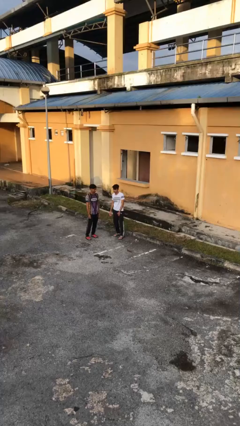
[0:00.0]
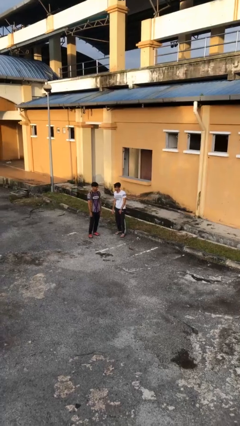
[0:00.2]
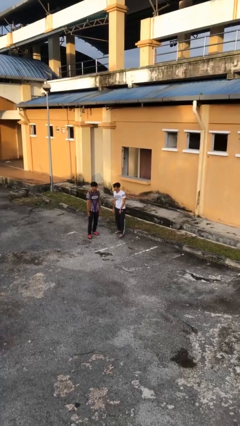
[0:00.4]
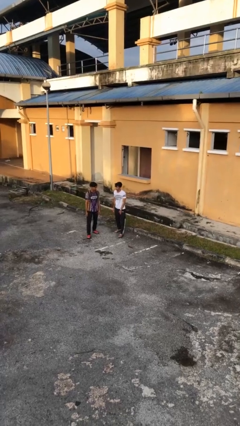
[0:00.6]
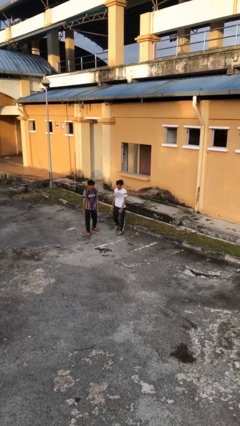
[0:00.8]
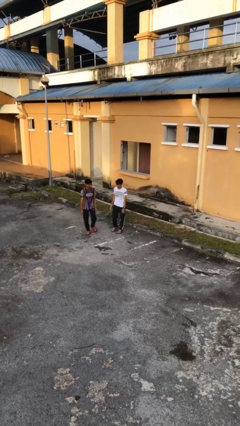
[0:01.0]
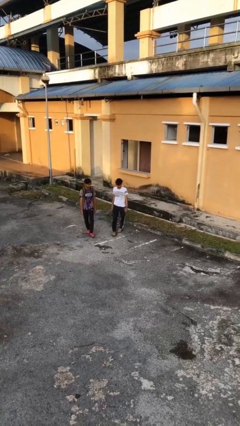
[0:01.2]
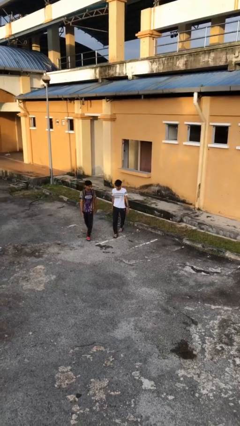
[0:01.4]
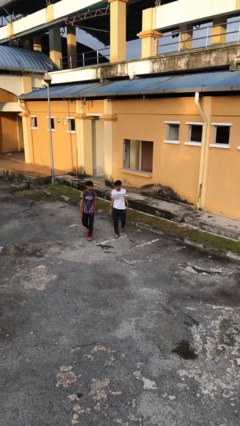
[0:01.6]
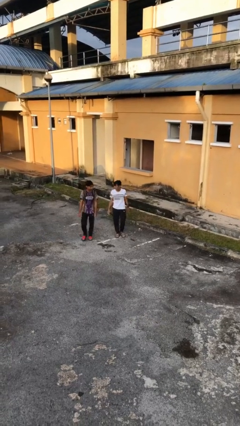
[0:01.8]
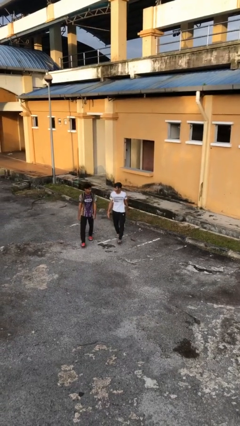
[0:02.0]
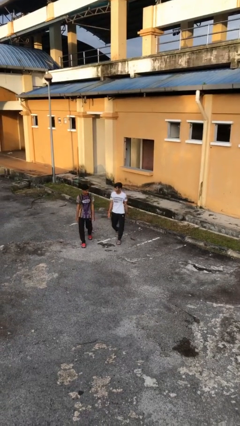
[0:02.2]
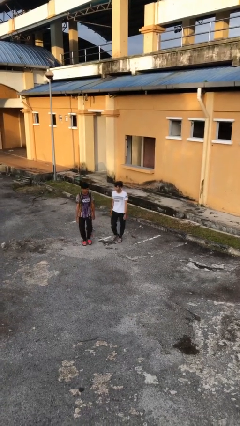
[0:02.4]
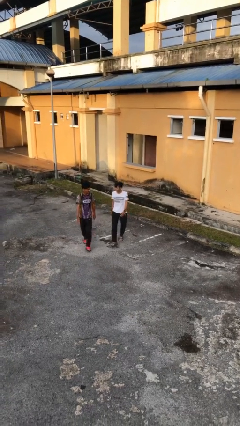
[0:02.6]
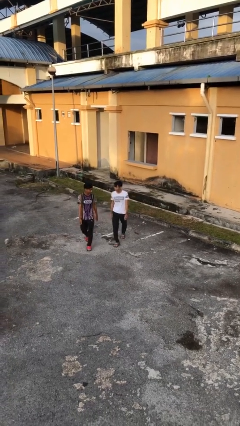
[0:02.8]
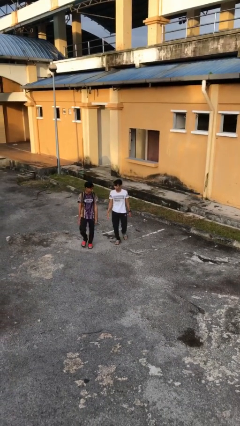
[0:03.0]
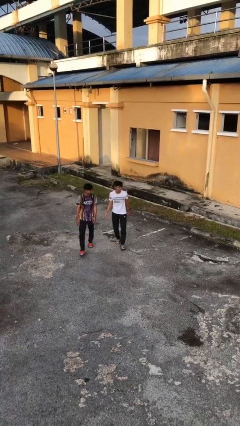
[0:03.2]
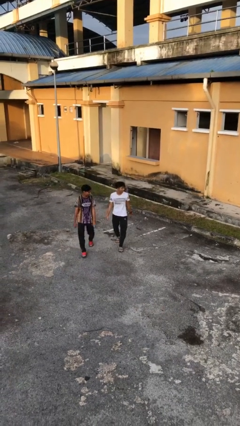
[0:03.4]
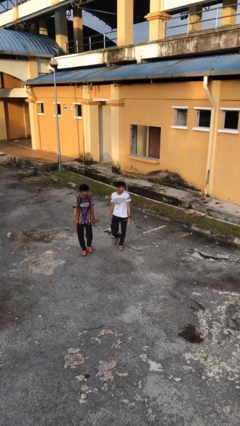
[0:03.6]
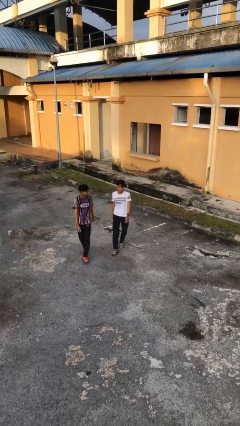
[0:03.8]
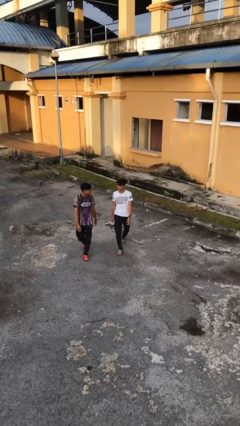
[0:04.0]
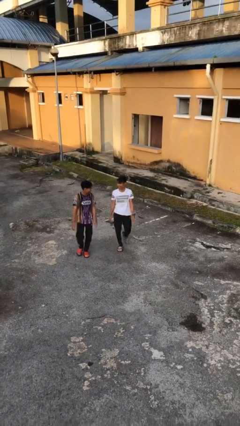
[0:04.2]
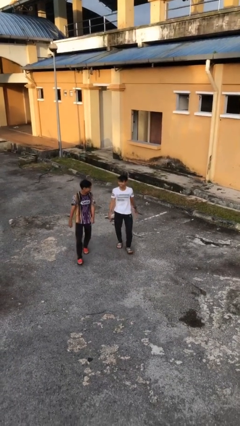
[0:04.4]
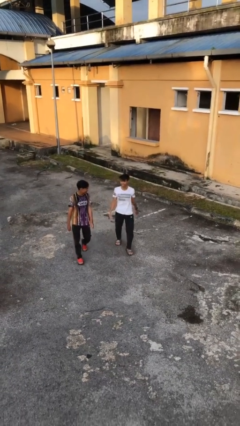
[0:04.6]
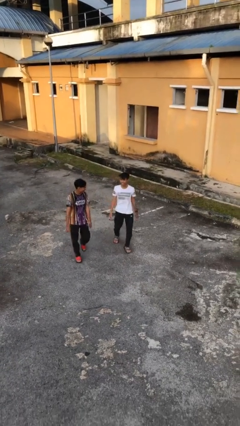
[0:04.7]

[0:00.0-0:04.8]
person talks to person

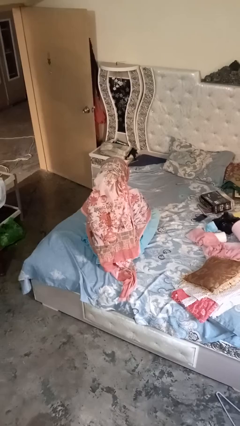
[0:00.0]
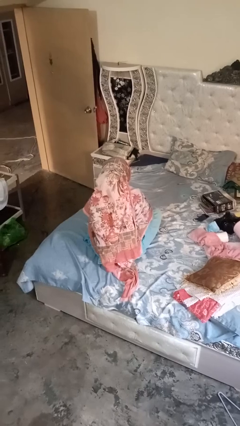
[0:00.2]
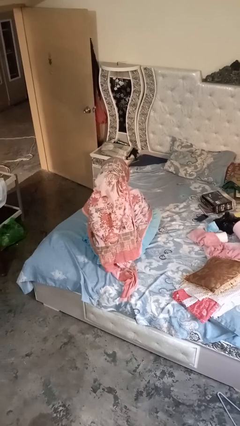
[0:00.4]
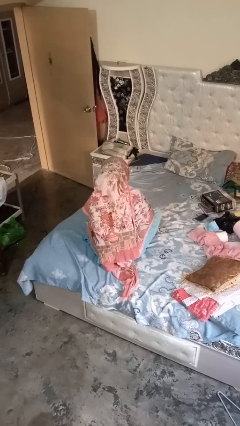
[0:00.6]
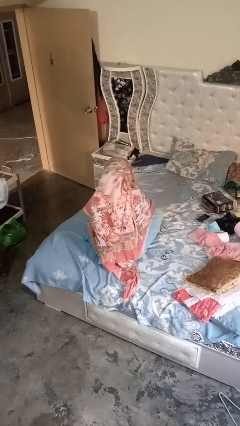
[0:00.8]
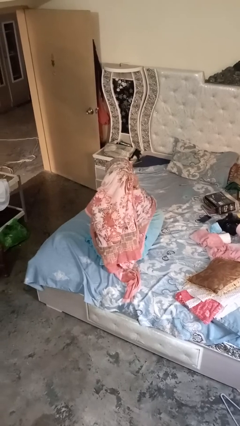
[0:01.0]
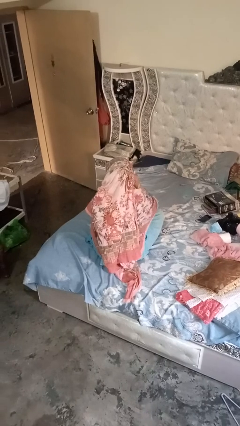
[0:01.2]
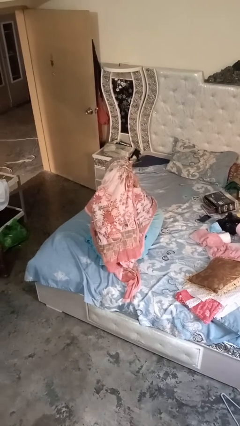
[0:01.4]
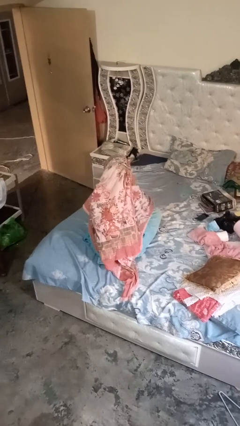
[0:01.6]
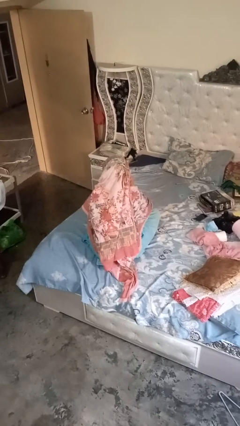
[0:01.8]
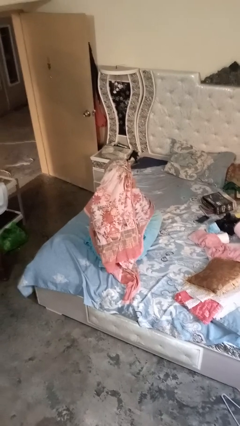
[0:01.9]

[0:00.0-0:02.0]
person gestures listen closely

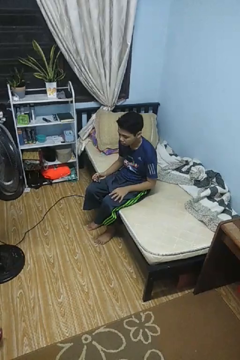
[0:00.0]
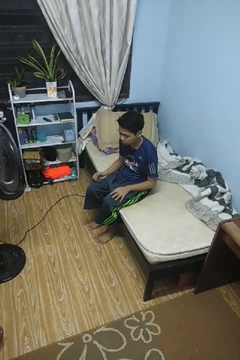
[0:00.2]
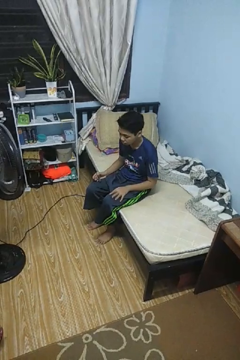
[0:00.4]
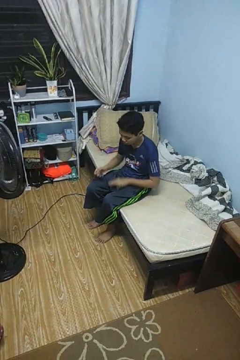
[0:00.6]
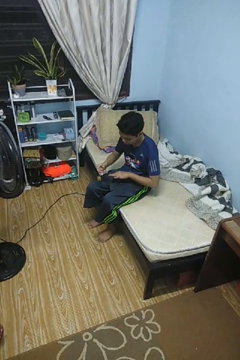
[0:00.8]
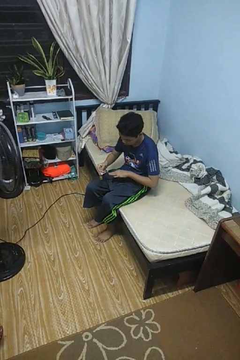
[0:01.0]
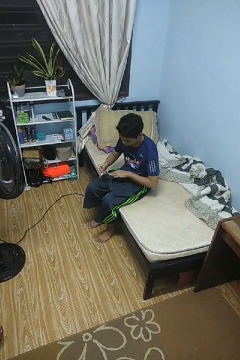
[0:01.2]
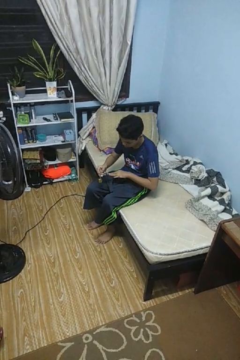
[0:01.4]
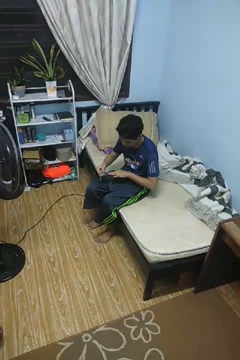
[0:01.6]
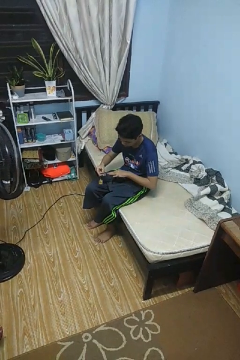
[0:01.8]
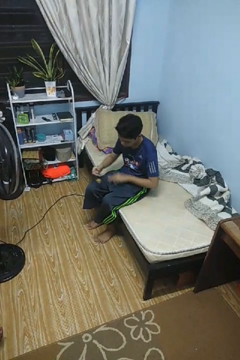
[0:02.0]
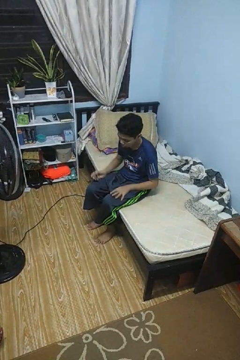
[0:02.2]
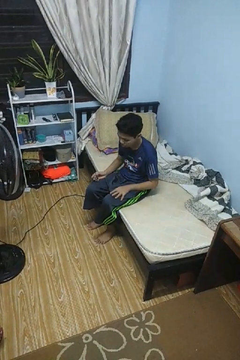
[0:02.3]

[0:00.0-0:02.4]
person clips fingernails

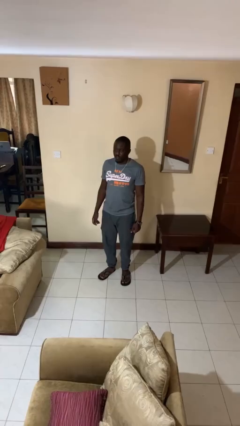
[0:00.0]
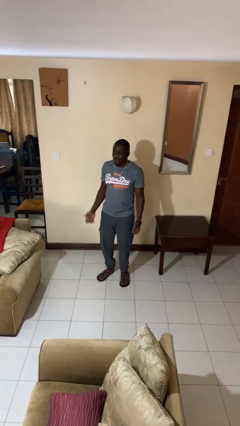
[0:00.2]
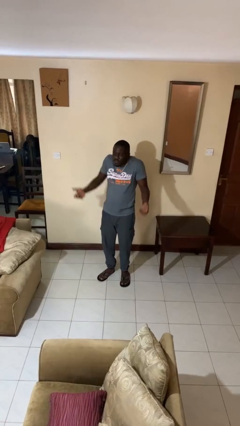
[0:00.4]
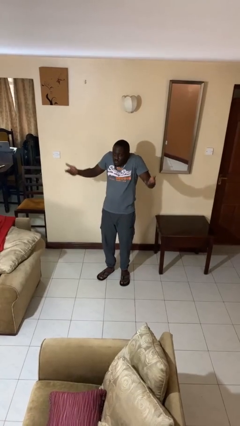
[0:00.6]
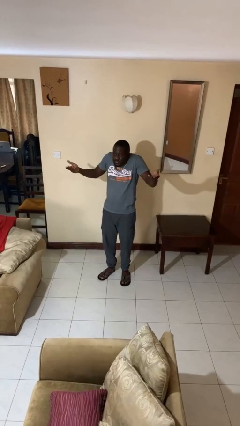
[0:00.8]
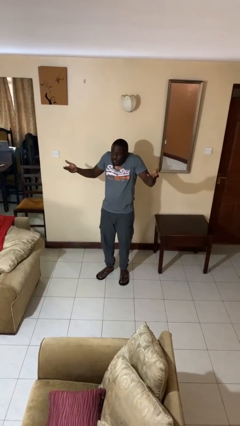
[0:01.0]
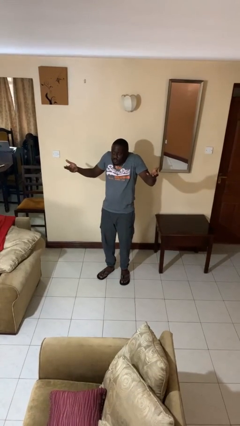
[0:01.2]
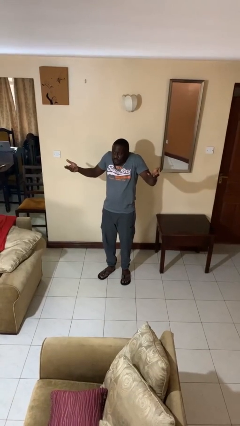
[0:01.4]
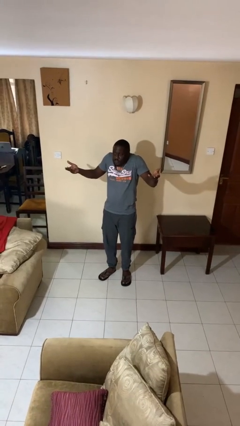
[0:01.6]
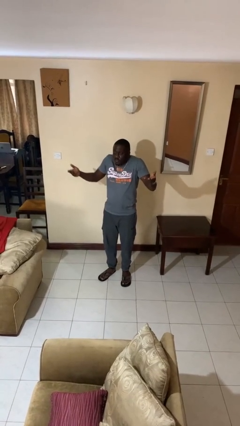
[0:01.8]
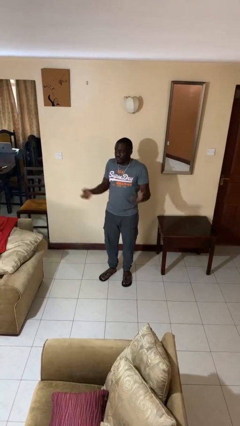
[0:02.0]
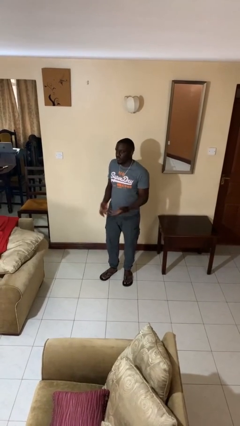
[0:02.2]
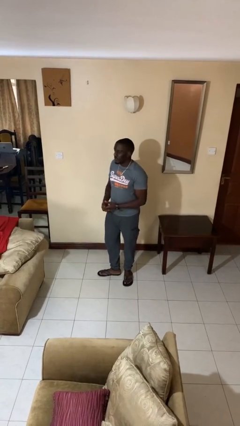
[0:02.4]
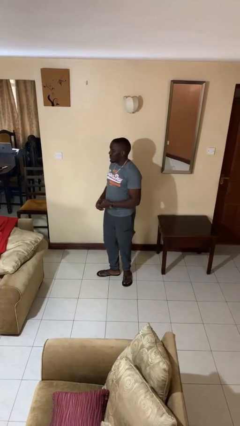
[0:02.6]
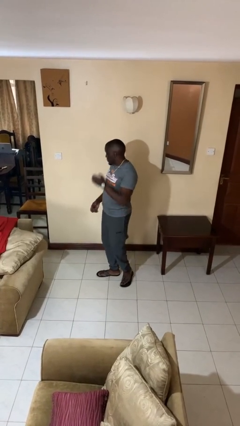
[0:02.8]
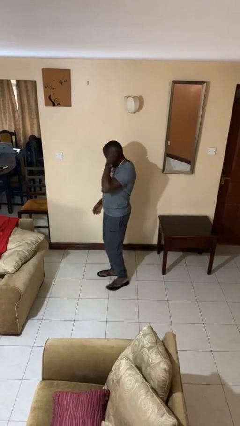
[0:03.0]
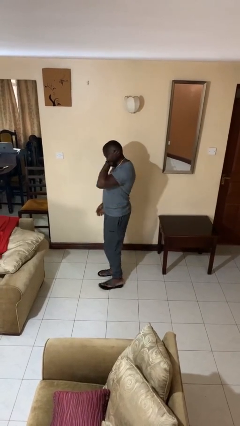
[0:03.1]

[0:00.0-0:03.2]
person shrugs

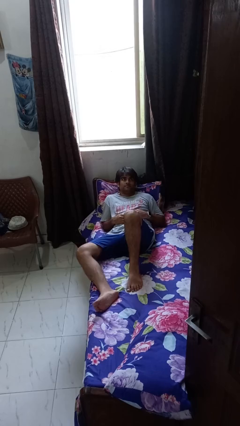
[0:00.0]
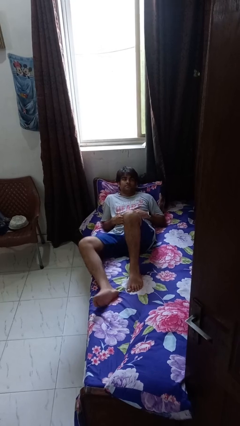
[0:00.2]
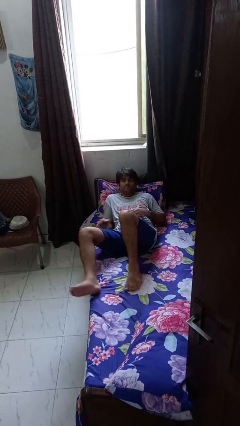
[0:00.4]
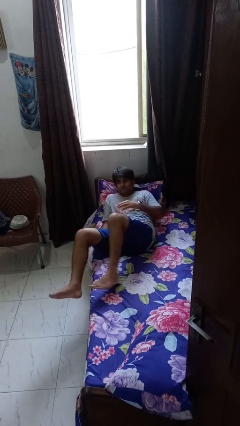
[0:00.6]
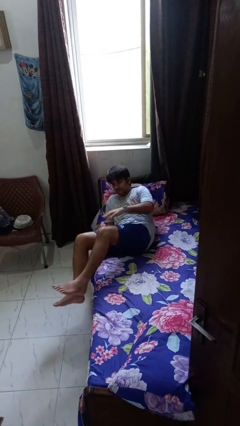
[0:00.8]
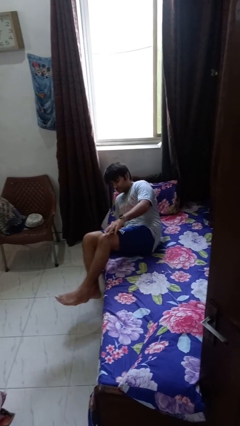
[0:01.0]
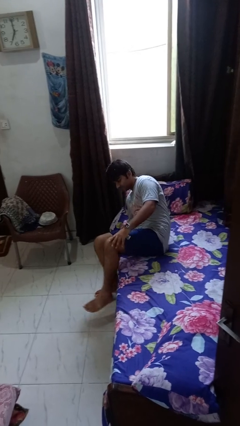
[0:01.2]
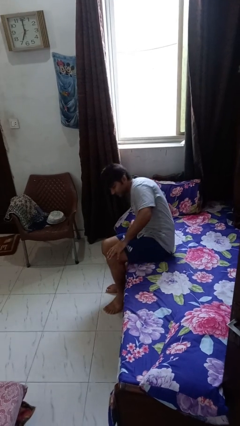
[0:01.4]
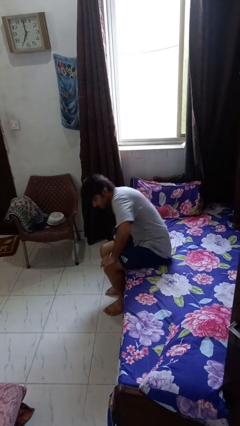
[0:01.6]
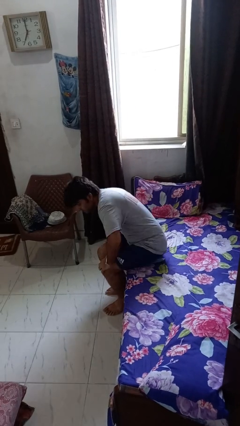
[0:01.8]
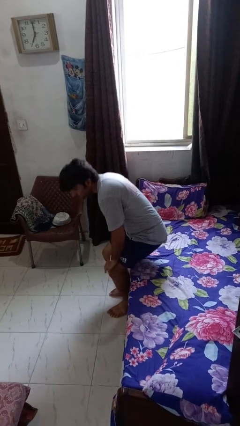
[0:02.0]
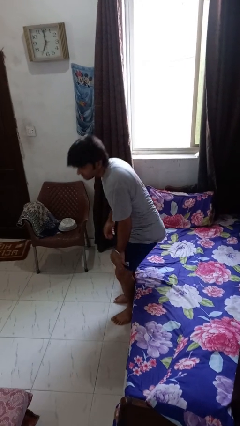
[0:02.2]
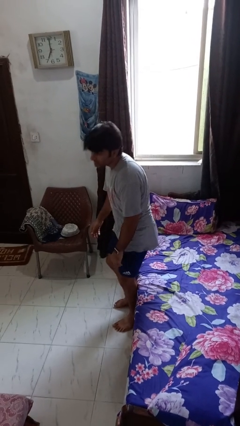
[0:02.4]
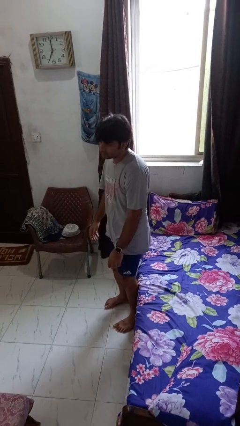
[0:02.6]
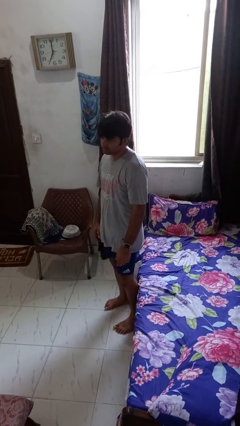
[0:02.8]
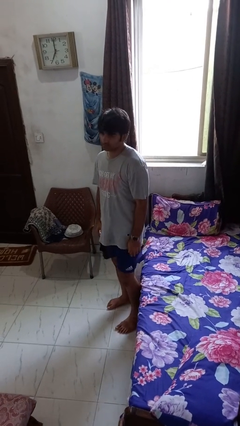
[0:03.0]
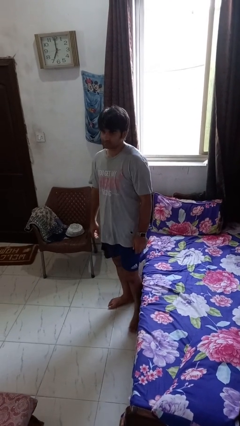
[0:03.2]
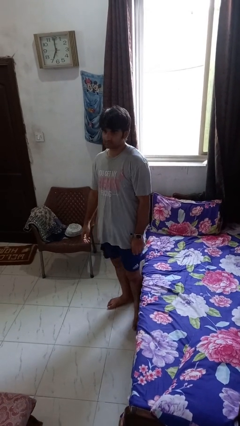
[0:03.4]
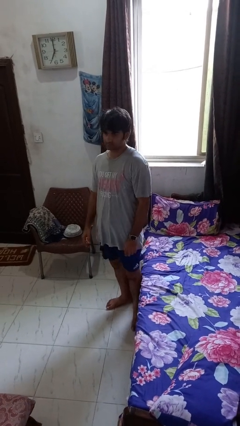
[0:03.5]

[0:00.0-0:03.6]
person stands up

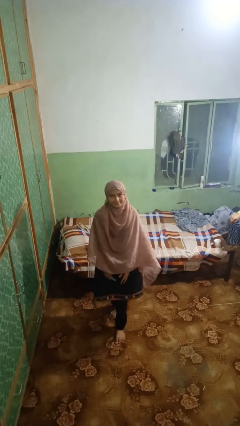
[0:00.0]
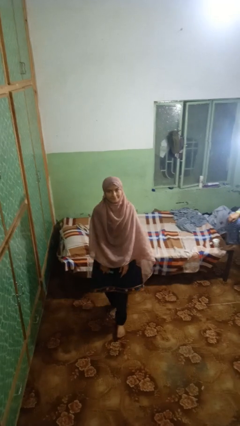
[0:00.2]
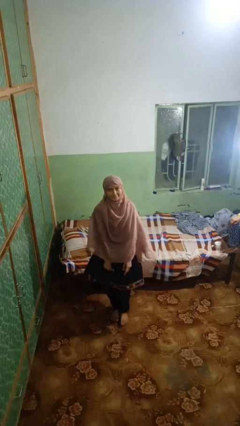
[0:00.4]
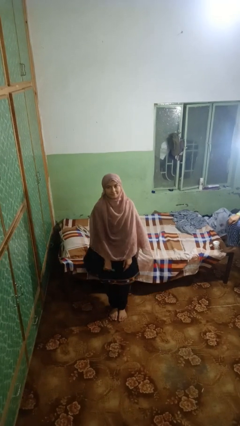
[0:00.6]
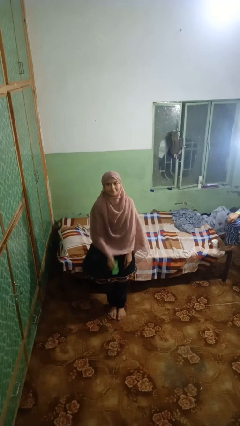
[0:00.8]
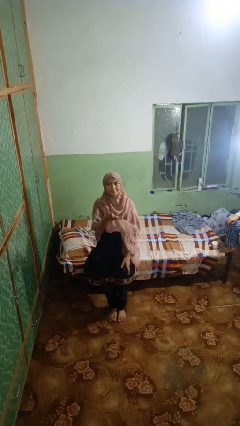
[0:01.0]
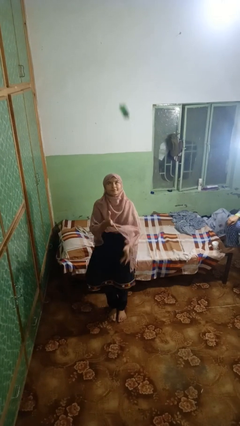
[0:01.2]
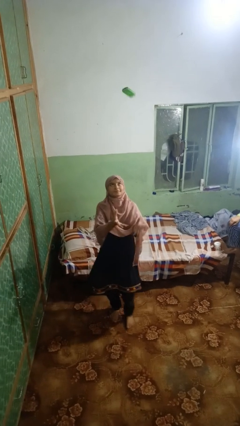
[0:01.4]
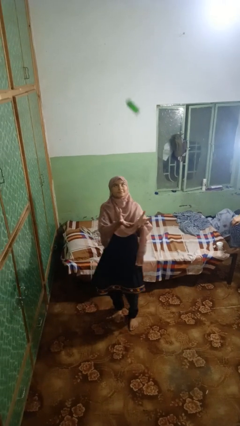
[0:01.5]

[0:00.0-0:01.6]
person throws object into air

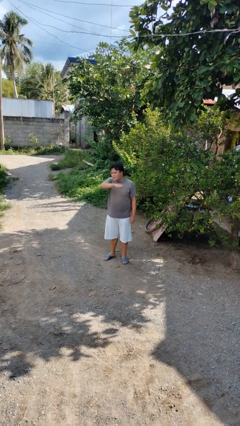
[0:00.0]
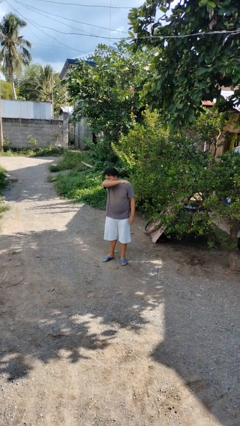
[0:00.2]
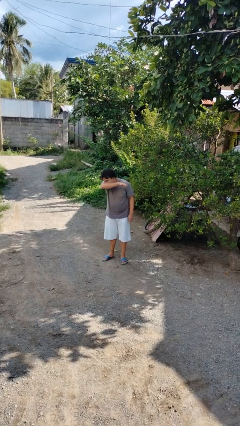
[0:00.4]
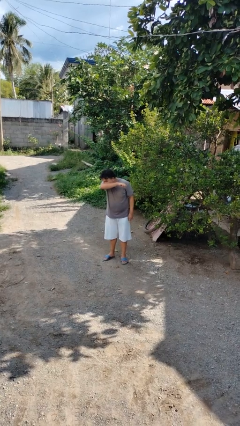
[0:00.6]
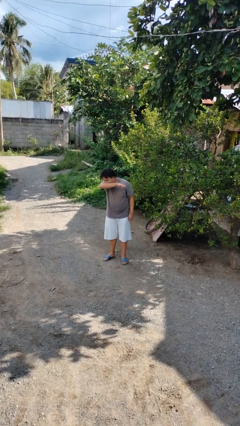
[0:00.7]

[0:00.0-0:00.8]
person sneezes into arm
